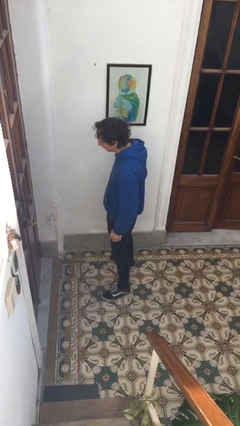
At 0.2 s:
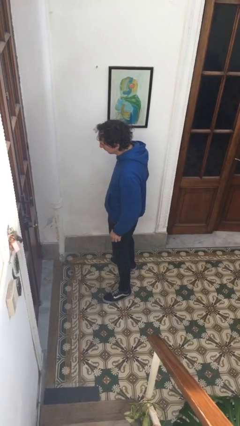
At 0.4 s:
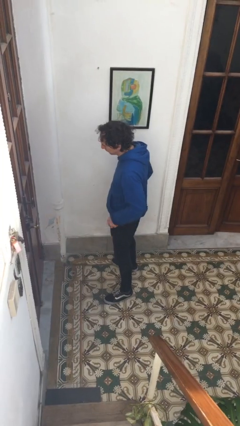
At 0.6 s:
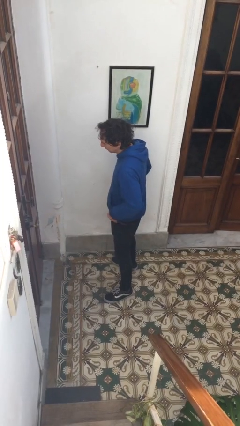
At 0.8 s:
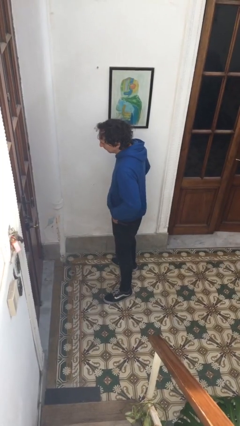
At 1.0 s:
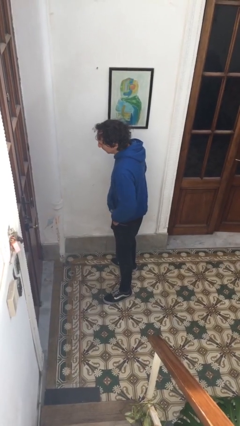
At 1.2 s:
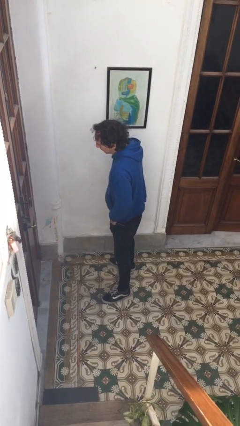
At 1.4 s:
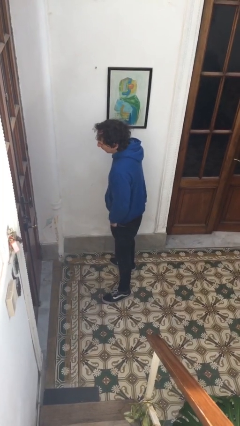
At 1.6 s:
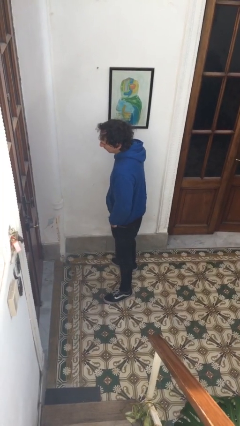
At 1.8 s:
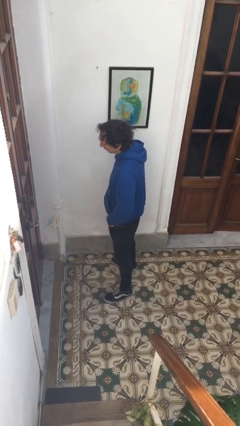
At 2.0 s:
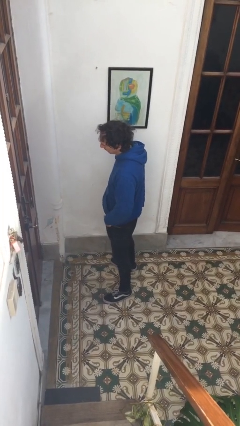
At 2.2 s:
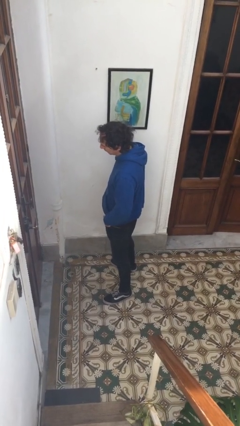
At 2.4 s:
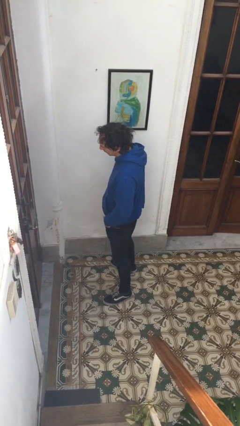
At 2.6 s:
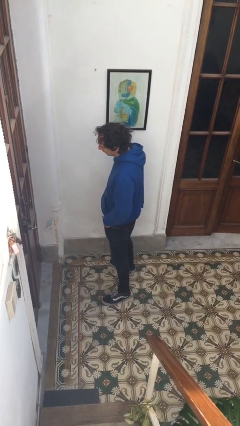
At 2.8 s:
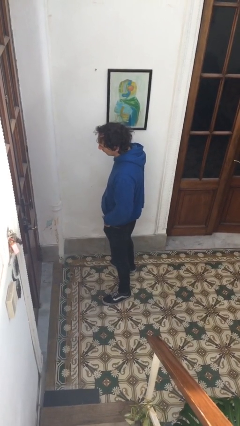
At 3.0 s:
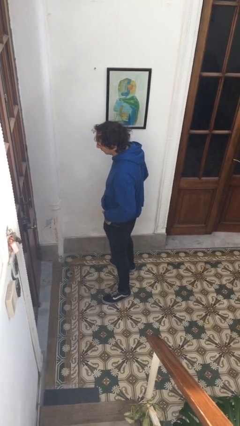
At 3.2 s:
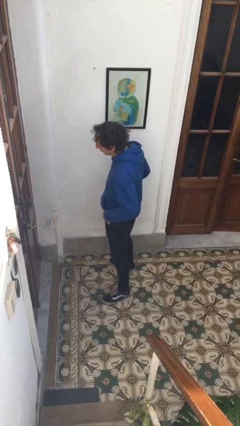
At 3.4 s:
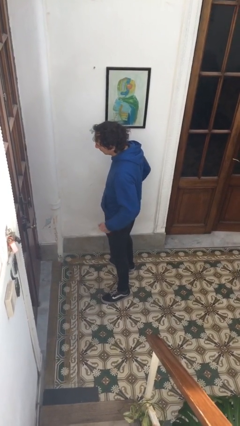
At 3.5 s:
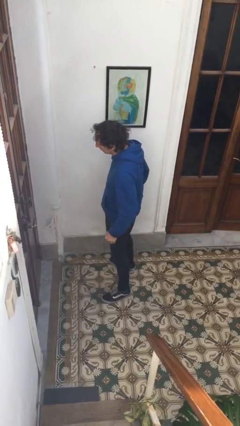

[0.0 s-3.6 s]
person puts hands in back pockets

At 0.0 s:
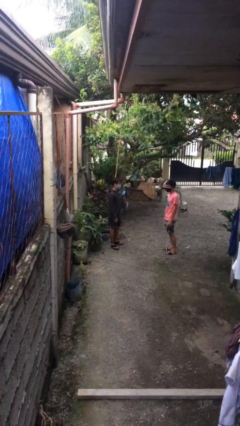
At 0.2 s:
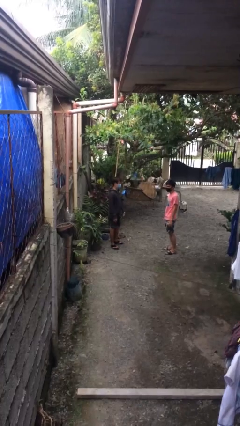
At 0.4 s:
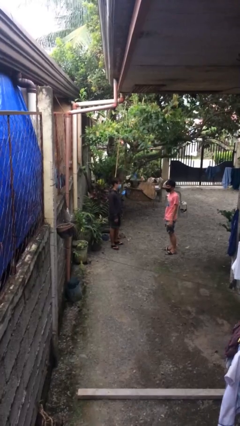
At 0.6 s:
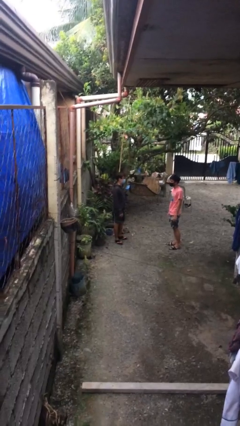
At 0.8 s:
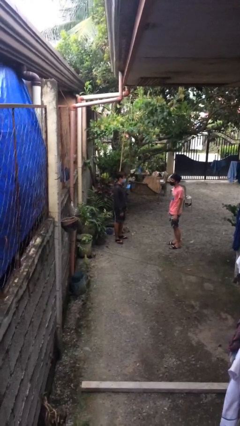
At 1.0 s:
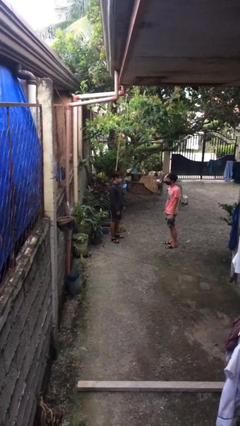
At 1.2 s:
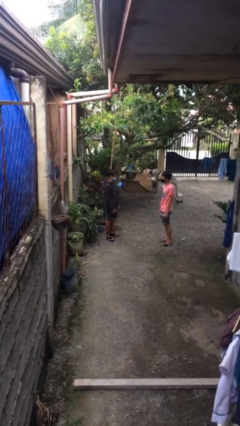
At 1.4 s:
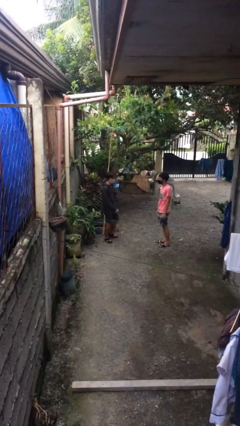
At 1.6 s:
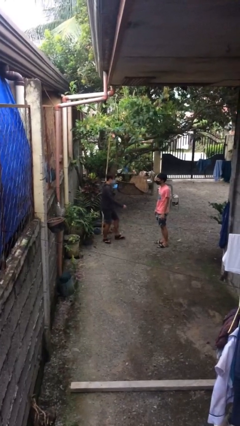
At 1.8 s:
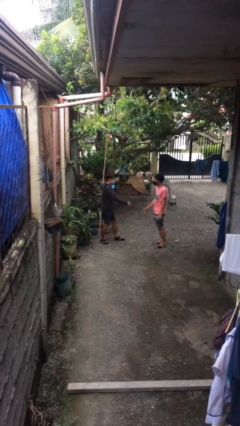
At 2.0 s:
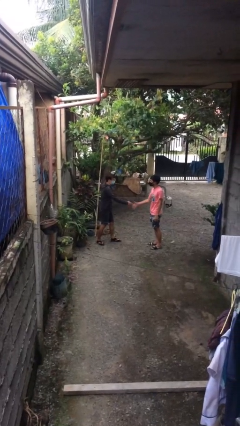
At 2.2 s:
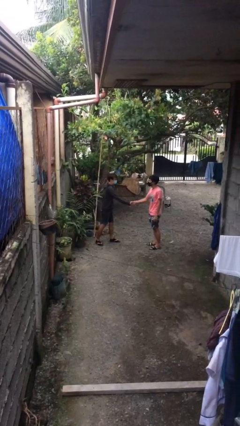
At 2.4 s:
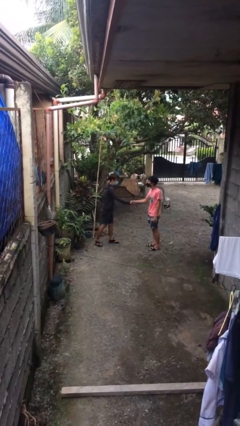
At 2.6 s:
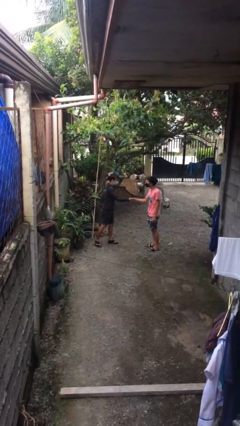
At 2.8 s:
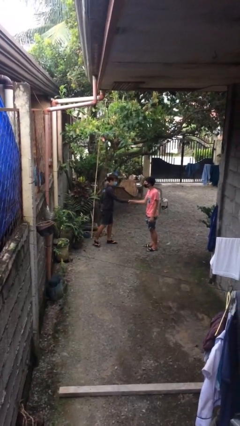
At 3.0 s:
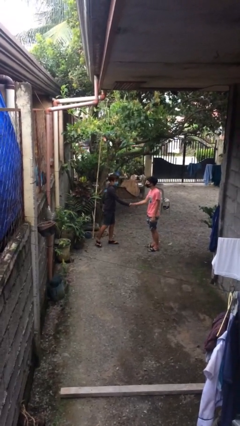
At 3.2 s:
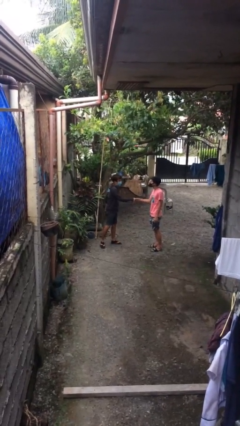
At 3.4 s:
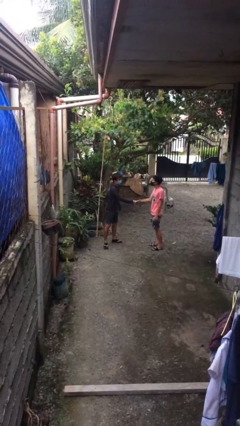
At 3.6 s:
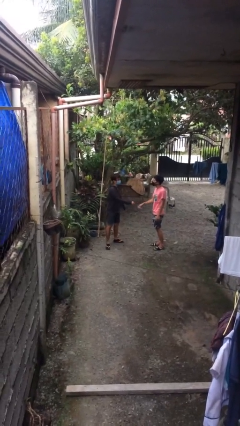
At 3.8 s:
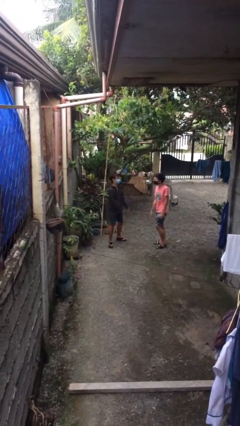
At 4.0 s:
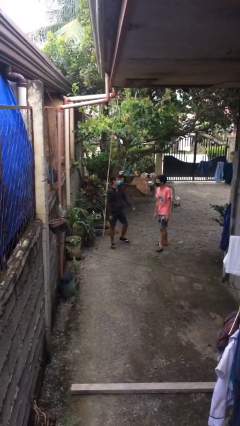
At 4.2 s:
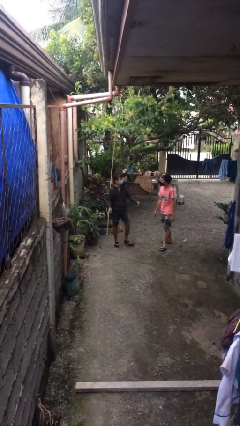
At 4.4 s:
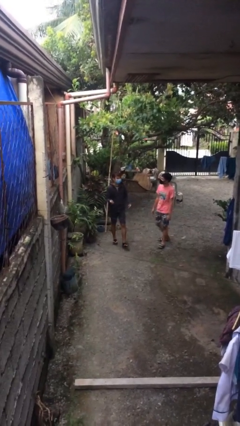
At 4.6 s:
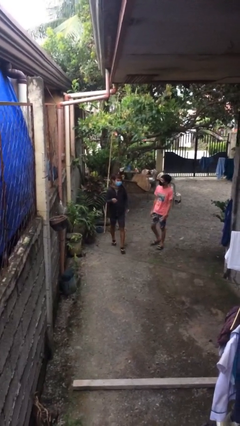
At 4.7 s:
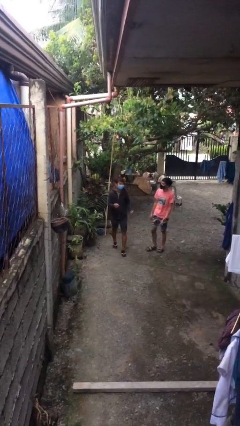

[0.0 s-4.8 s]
person shakes hand

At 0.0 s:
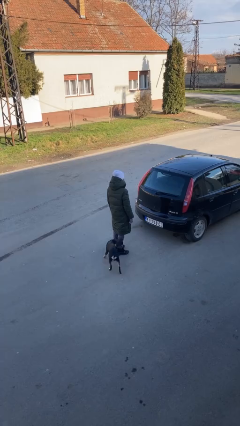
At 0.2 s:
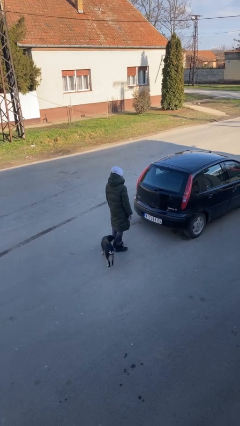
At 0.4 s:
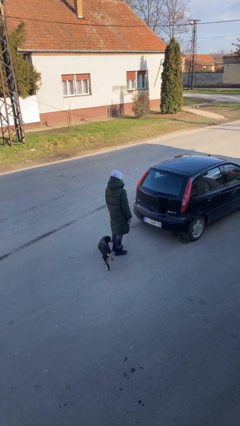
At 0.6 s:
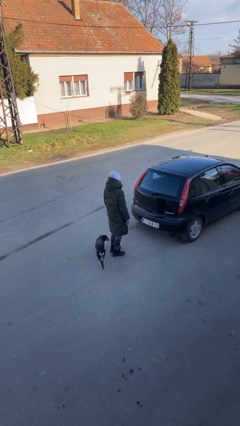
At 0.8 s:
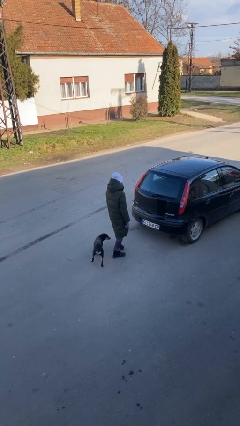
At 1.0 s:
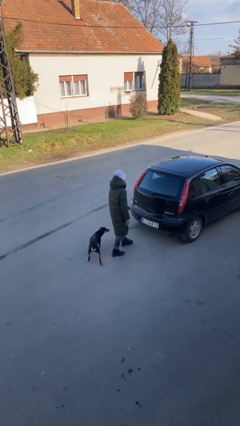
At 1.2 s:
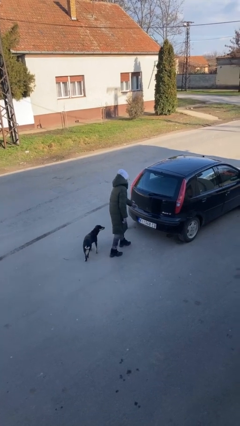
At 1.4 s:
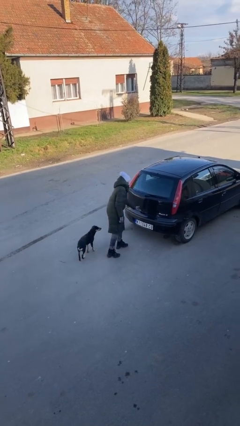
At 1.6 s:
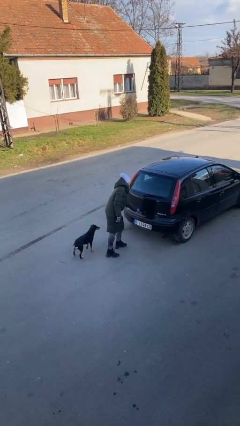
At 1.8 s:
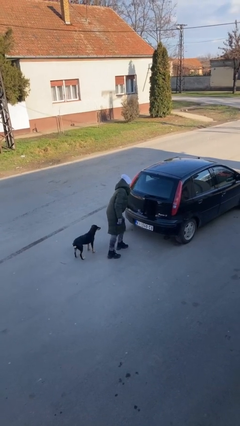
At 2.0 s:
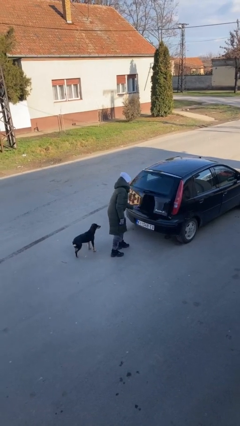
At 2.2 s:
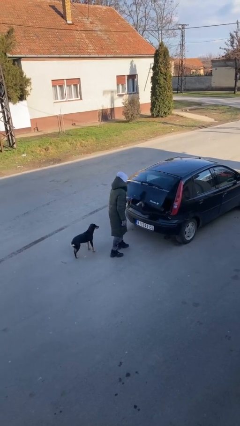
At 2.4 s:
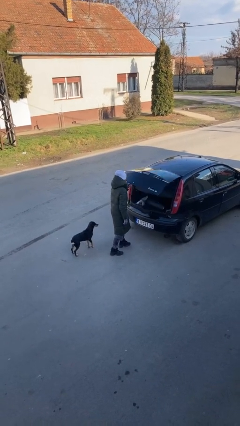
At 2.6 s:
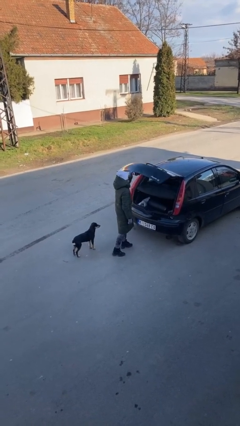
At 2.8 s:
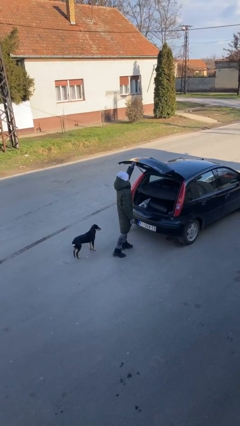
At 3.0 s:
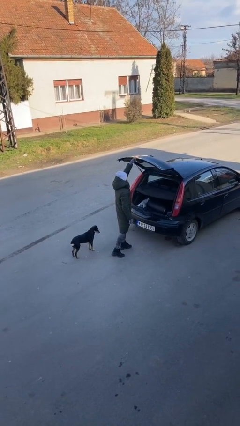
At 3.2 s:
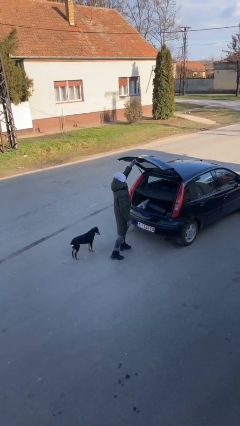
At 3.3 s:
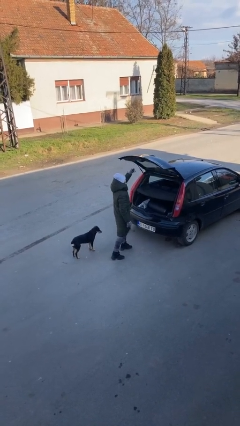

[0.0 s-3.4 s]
person opens car trunk

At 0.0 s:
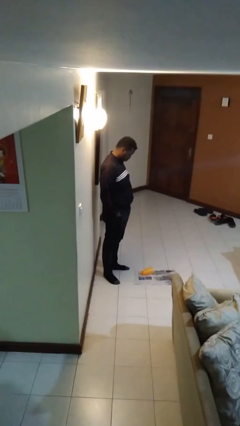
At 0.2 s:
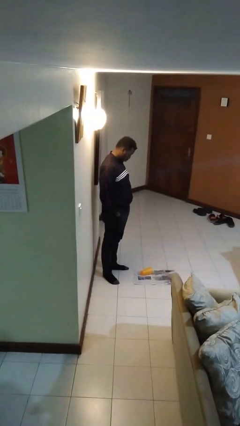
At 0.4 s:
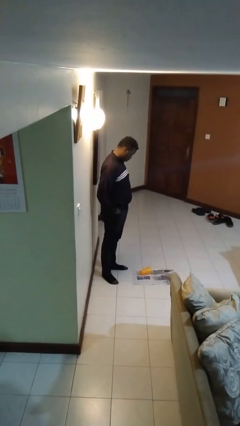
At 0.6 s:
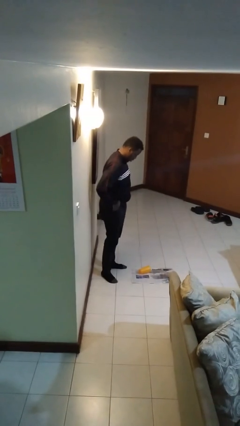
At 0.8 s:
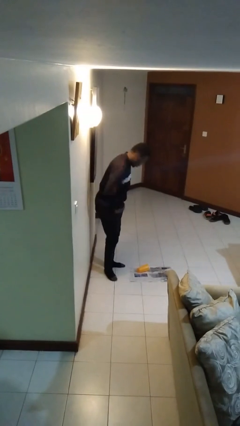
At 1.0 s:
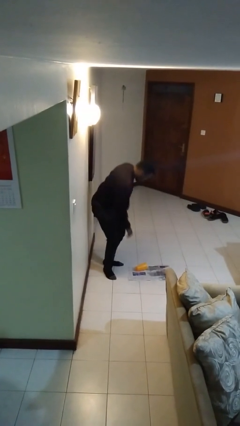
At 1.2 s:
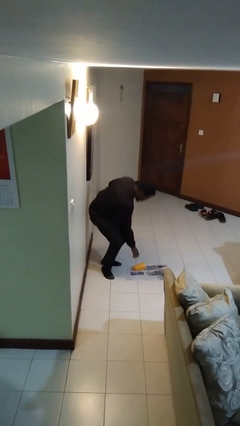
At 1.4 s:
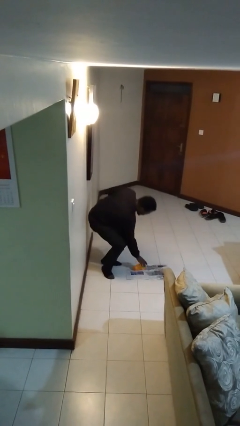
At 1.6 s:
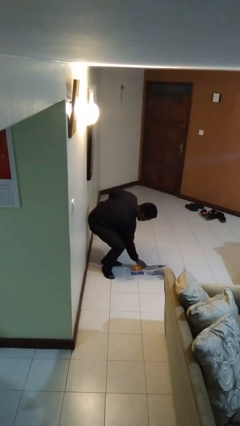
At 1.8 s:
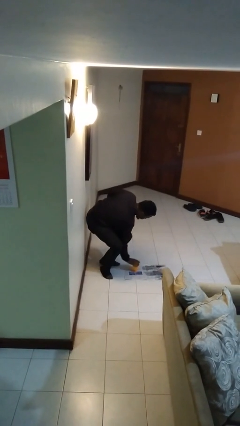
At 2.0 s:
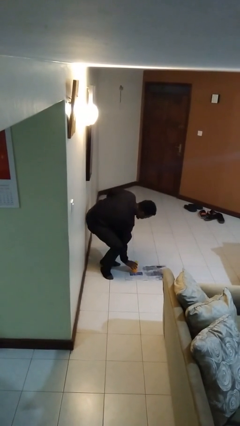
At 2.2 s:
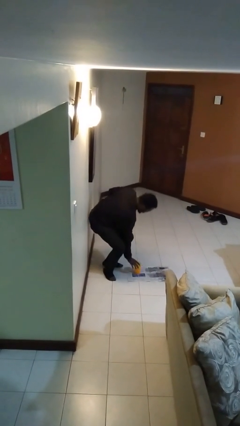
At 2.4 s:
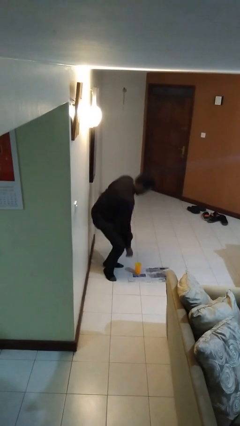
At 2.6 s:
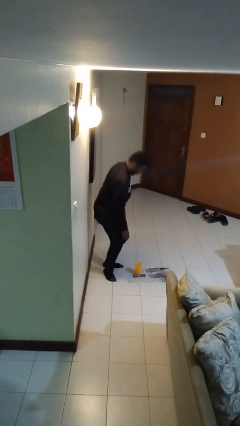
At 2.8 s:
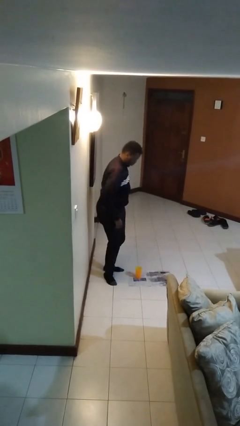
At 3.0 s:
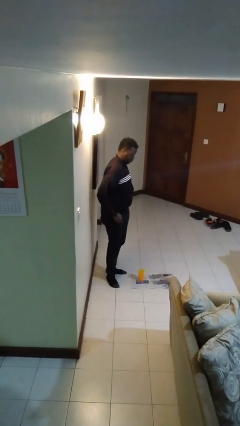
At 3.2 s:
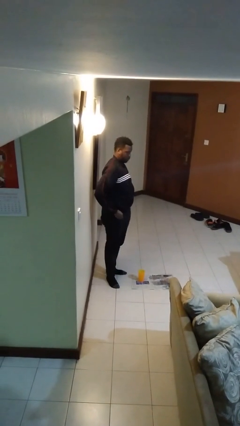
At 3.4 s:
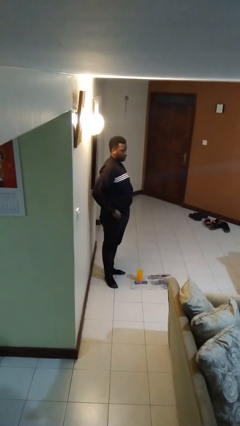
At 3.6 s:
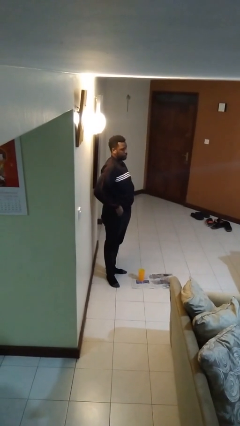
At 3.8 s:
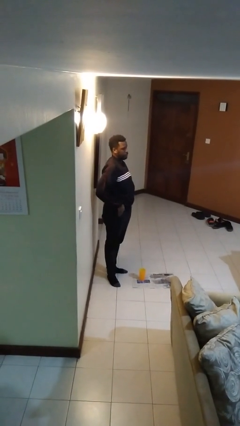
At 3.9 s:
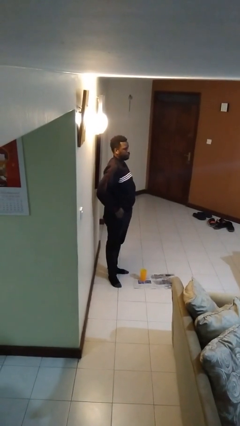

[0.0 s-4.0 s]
person sets upright glass

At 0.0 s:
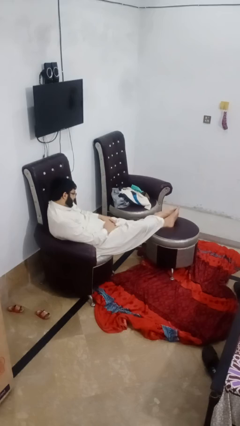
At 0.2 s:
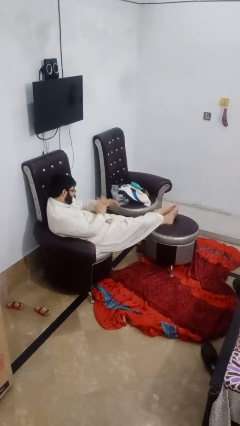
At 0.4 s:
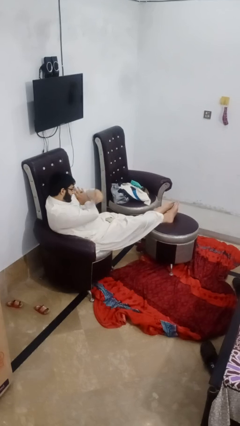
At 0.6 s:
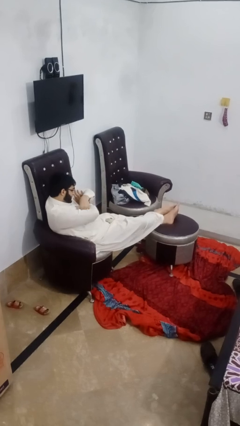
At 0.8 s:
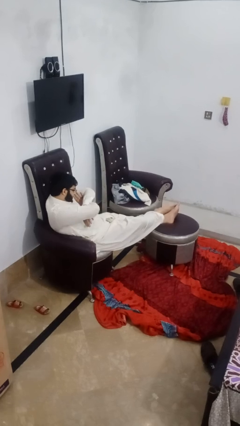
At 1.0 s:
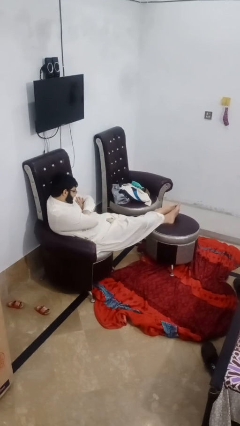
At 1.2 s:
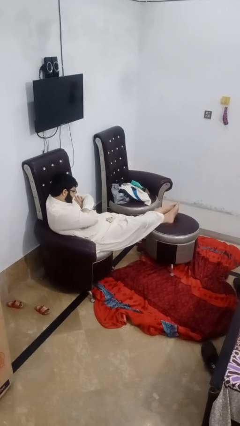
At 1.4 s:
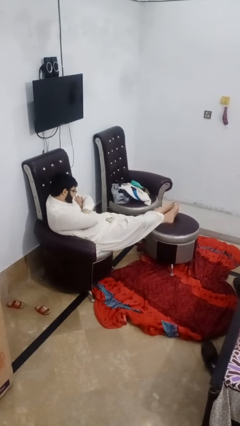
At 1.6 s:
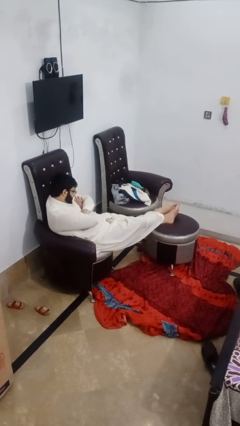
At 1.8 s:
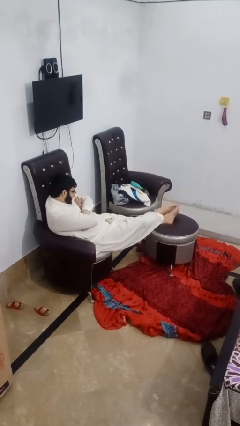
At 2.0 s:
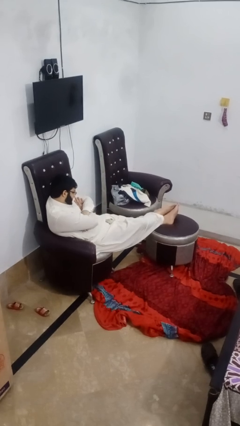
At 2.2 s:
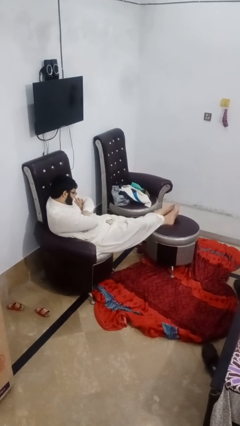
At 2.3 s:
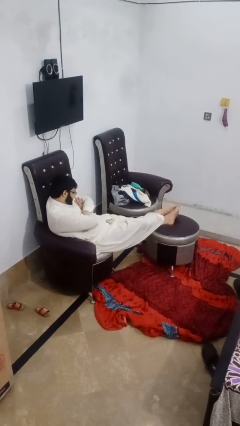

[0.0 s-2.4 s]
person crosses arms
